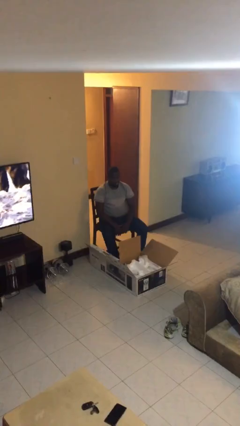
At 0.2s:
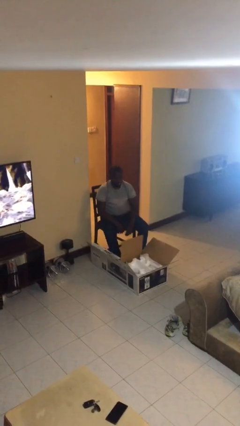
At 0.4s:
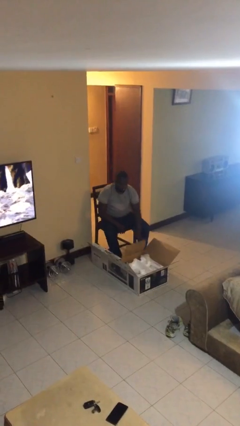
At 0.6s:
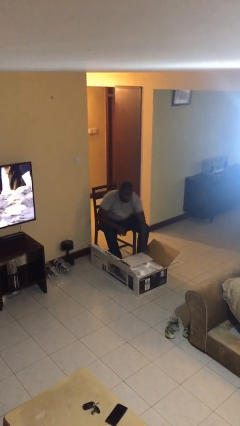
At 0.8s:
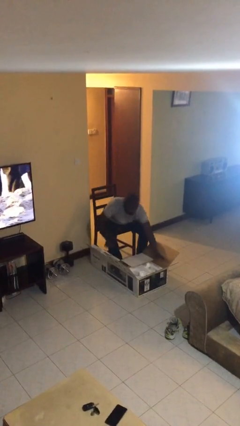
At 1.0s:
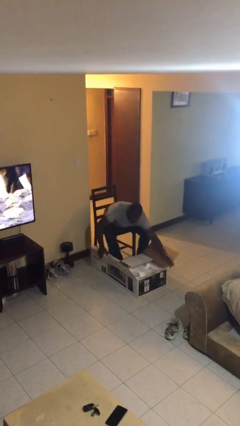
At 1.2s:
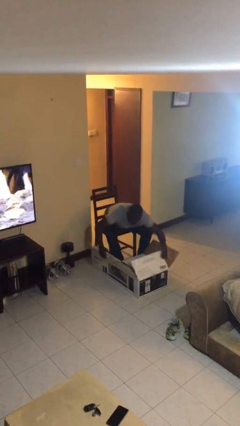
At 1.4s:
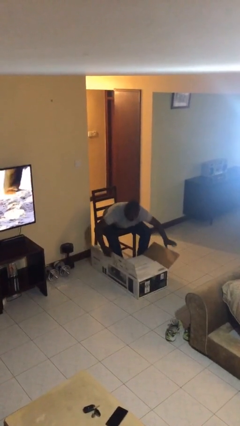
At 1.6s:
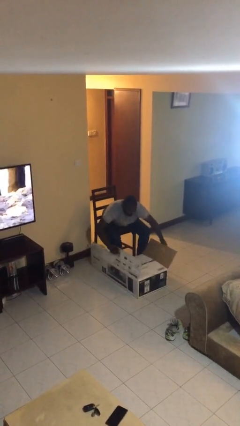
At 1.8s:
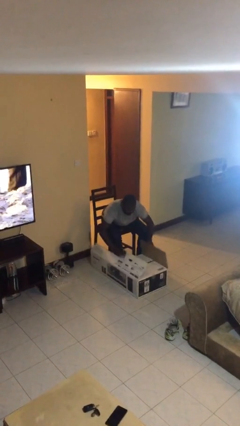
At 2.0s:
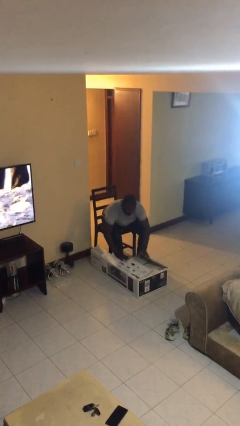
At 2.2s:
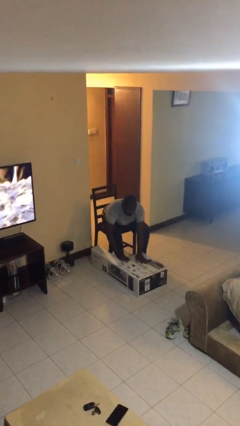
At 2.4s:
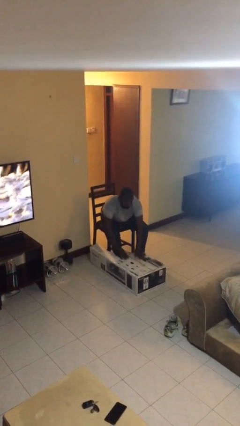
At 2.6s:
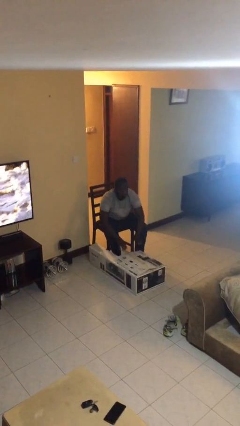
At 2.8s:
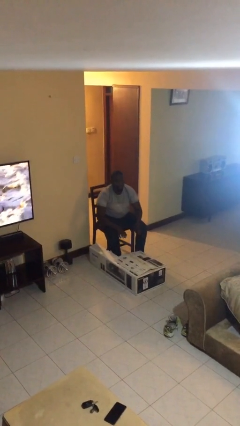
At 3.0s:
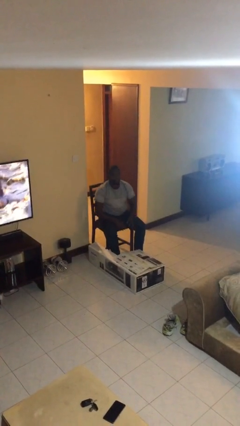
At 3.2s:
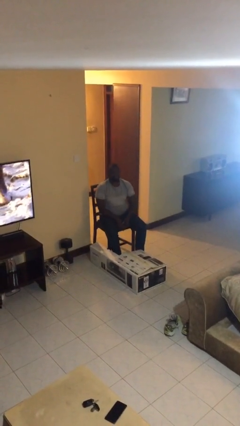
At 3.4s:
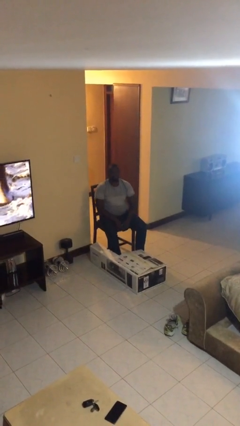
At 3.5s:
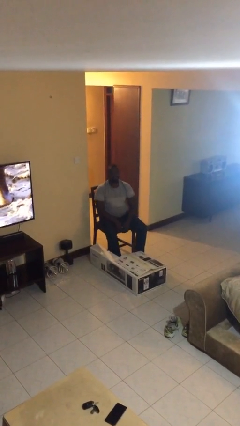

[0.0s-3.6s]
person closes box

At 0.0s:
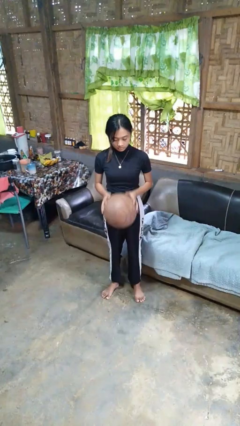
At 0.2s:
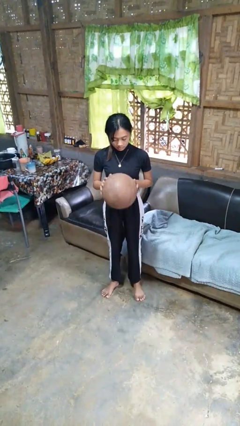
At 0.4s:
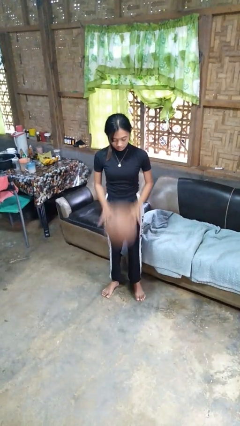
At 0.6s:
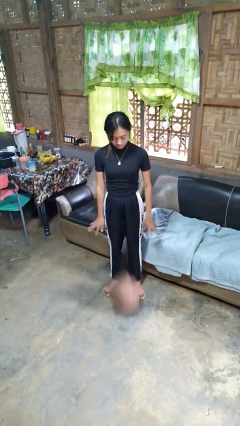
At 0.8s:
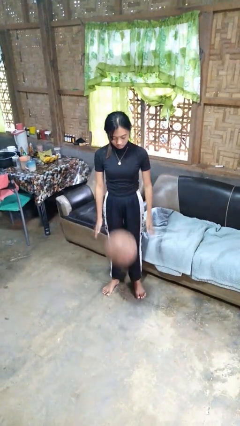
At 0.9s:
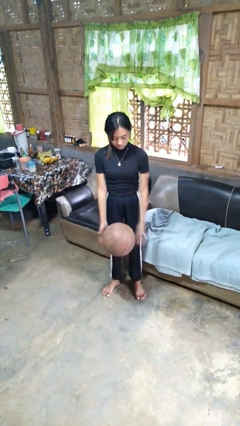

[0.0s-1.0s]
person bounces ball on floor

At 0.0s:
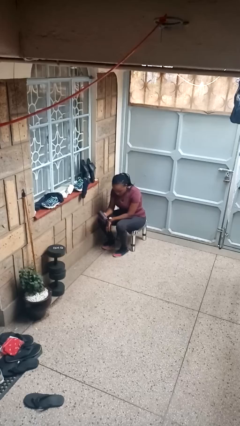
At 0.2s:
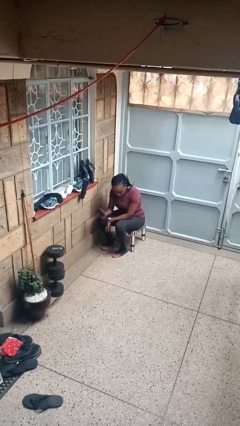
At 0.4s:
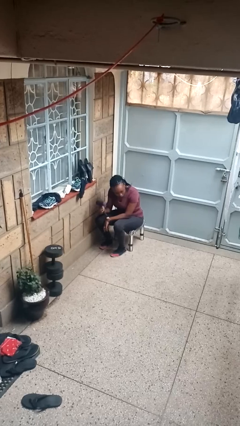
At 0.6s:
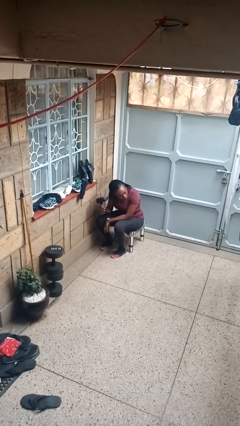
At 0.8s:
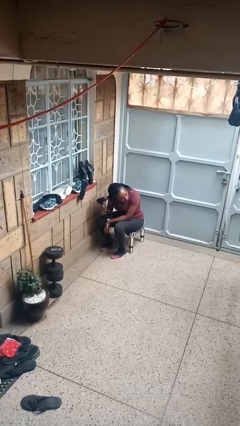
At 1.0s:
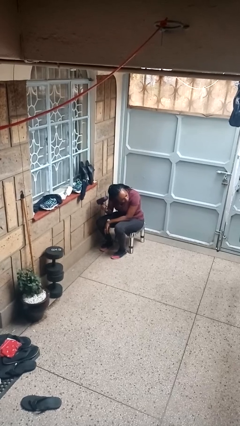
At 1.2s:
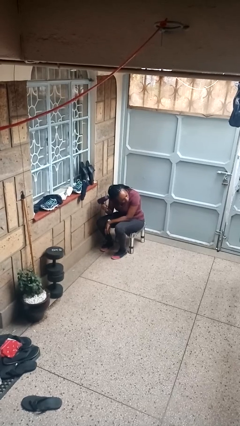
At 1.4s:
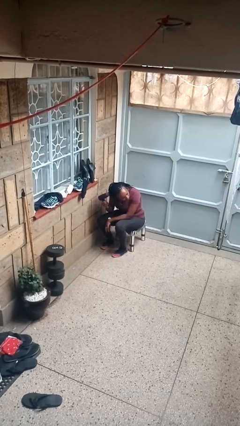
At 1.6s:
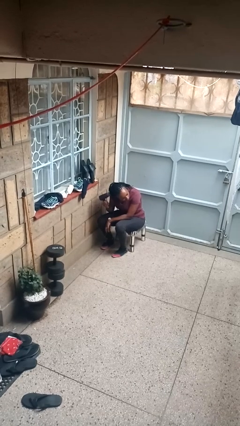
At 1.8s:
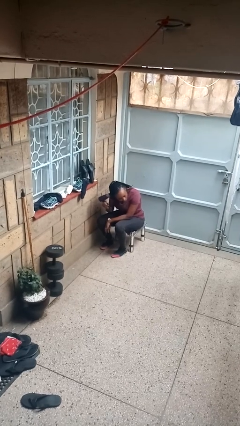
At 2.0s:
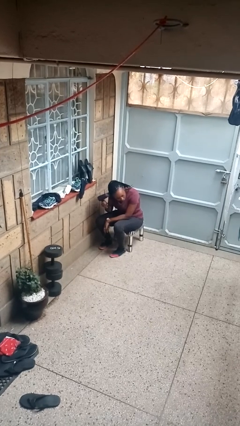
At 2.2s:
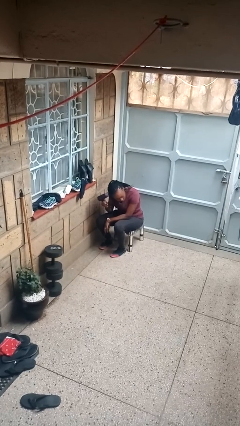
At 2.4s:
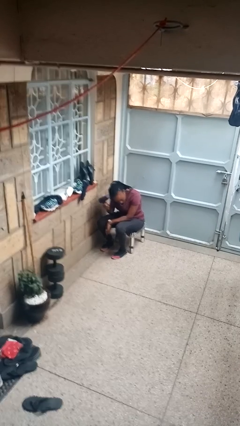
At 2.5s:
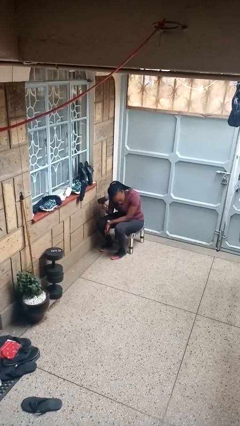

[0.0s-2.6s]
person dries hair with hairdryer

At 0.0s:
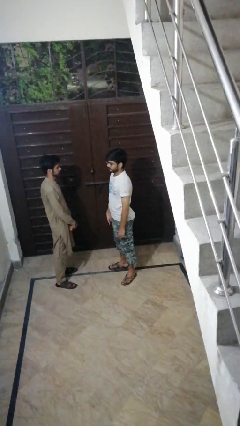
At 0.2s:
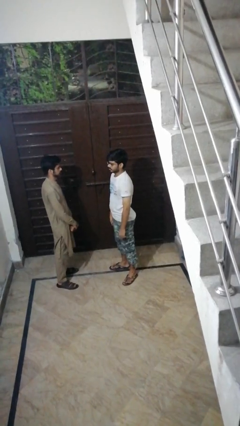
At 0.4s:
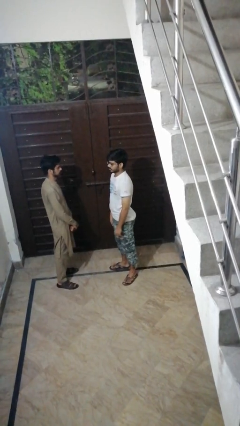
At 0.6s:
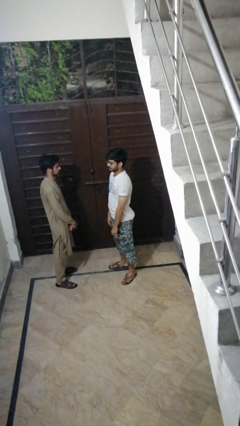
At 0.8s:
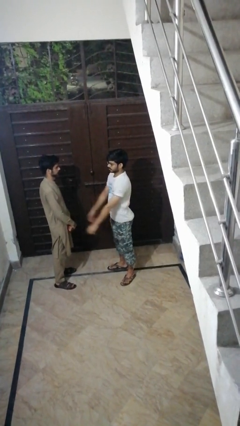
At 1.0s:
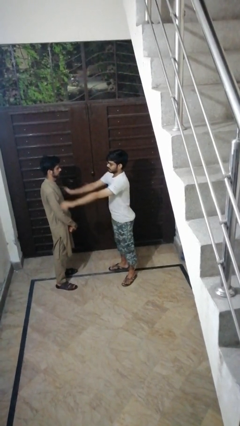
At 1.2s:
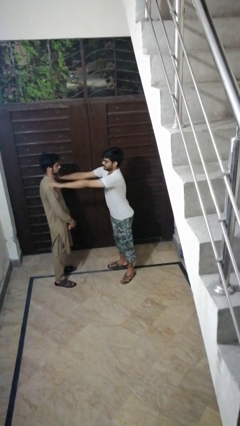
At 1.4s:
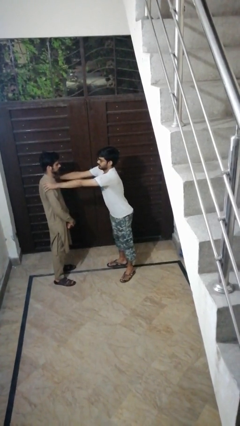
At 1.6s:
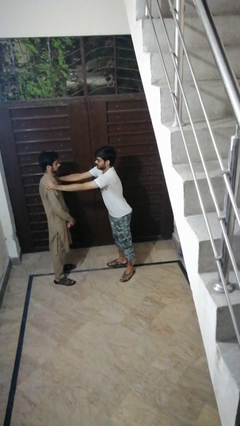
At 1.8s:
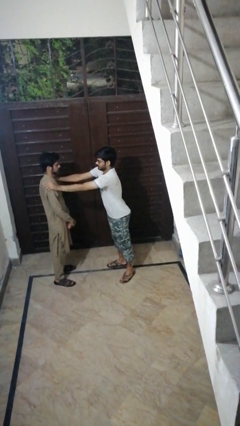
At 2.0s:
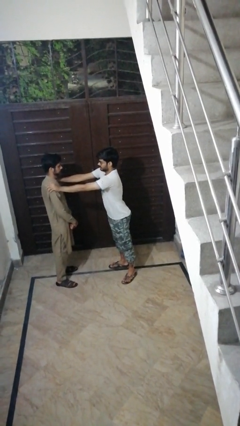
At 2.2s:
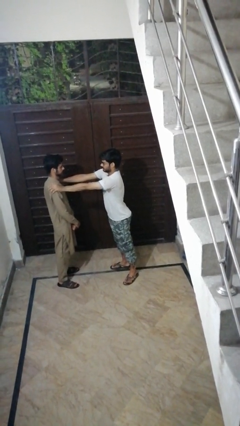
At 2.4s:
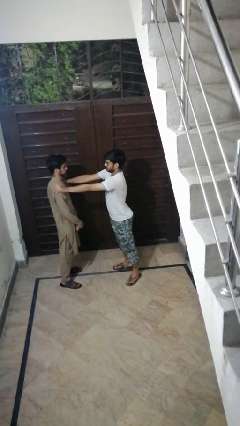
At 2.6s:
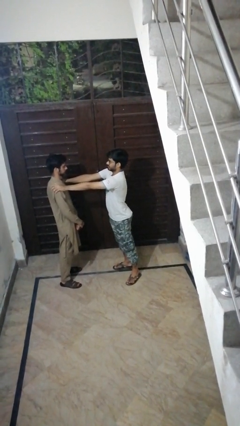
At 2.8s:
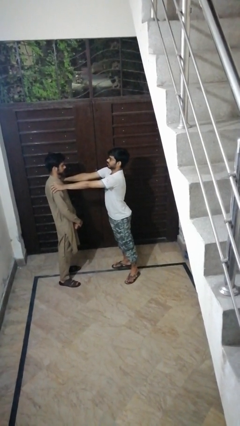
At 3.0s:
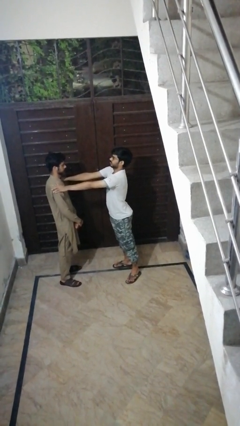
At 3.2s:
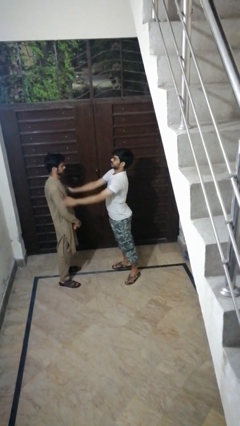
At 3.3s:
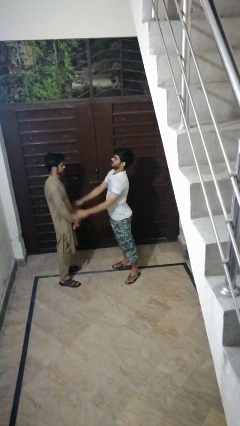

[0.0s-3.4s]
person pounds shoulders of person

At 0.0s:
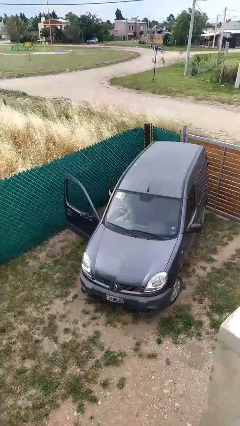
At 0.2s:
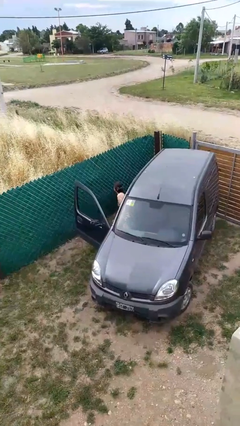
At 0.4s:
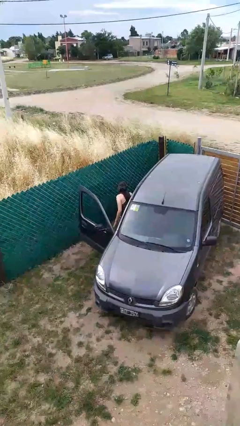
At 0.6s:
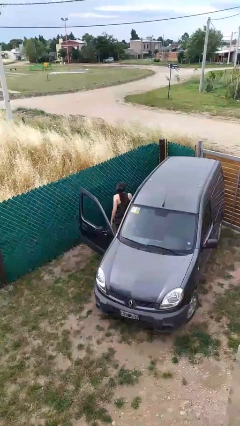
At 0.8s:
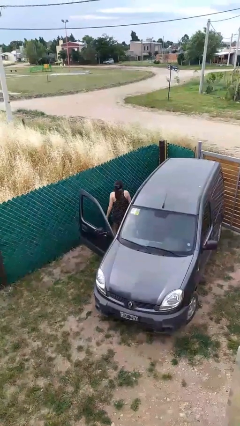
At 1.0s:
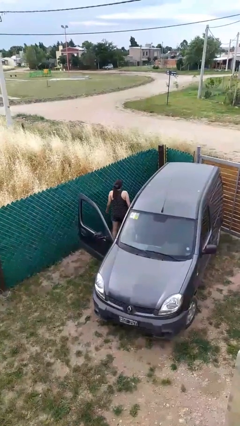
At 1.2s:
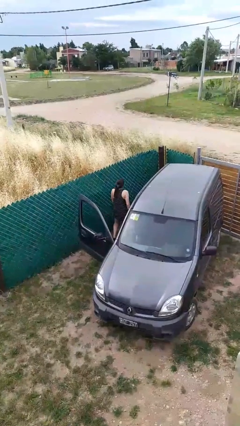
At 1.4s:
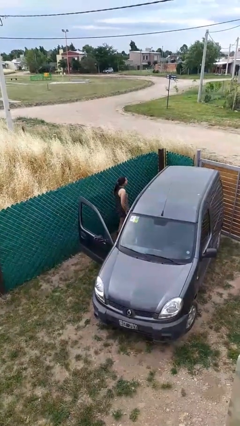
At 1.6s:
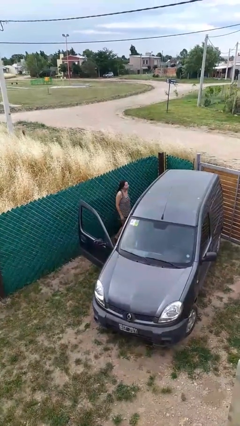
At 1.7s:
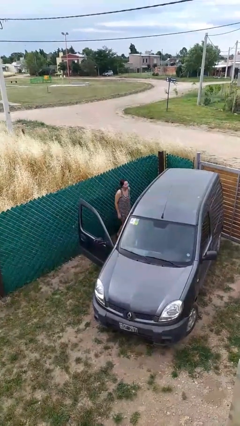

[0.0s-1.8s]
person exits car

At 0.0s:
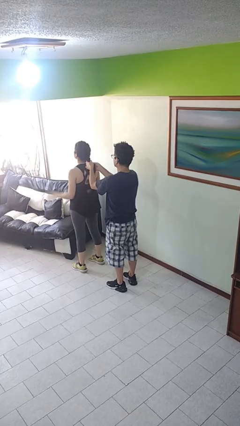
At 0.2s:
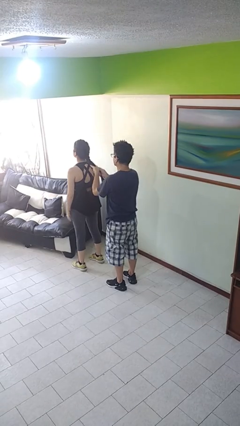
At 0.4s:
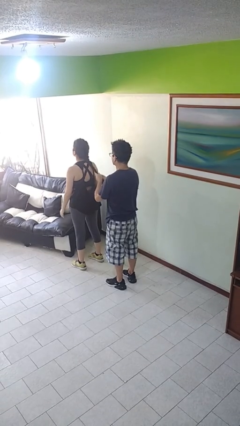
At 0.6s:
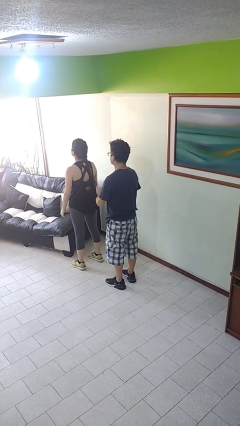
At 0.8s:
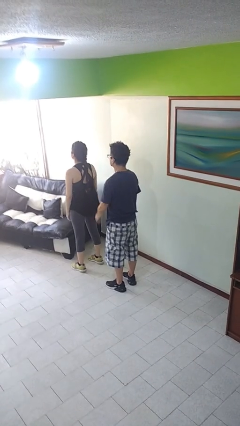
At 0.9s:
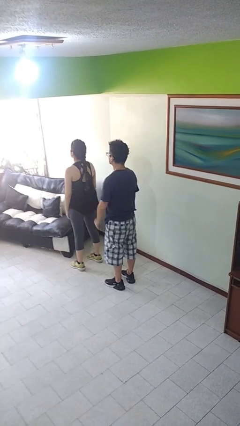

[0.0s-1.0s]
person grabs person by hair

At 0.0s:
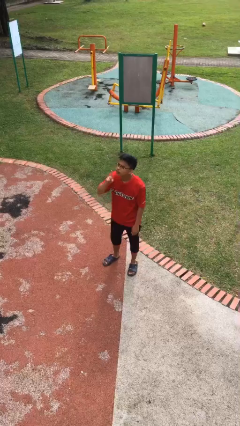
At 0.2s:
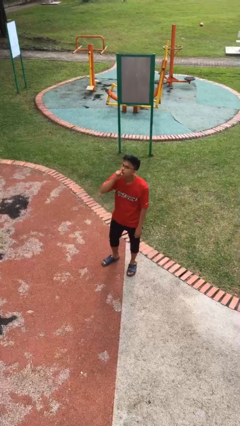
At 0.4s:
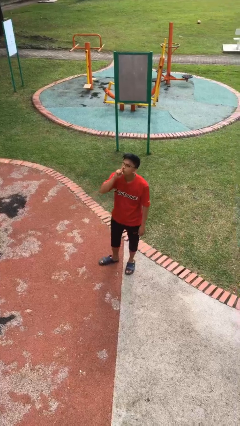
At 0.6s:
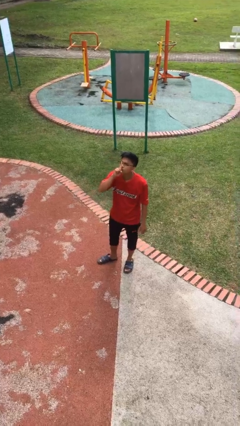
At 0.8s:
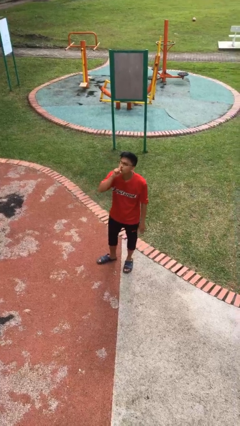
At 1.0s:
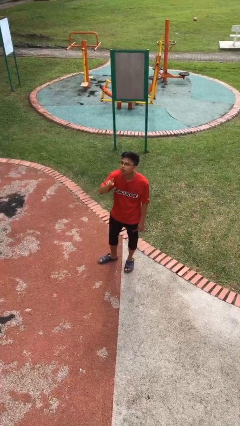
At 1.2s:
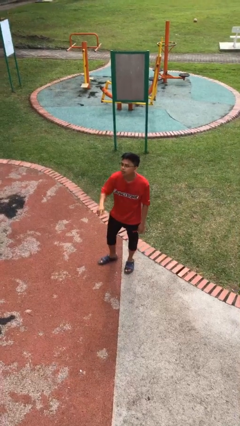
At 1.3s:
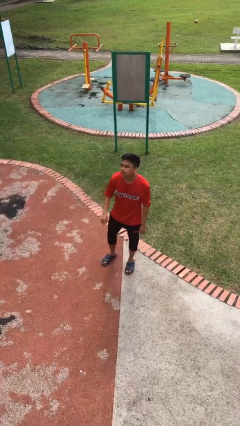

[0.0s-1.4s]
person gestures be quiet

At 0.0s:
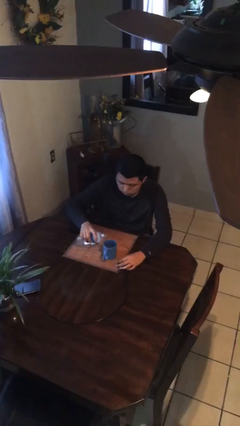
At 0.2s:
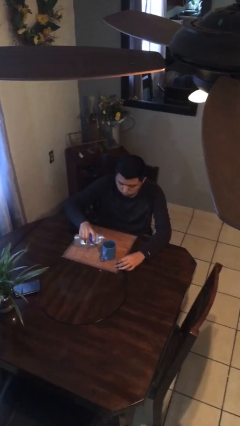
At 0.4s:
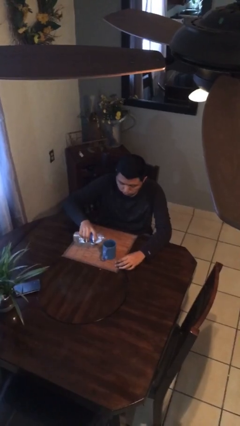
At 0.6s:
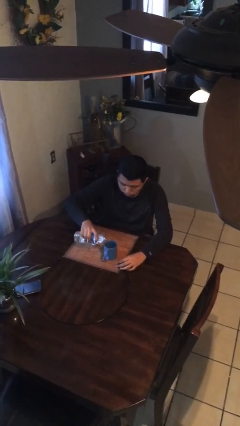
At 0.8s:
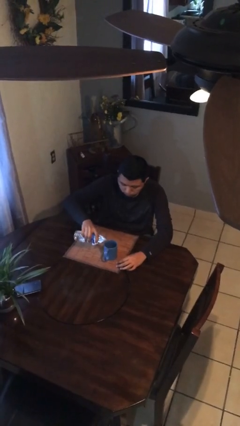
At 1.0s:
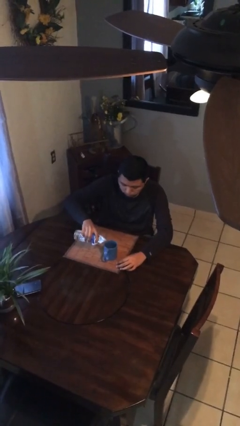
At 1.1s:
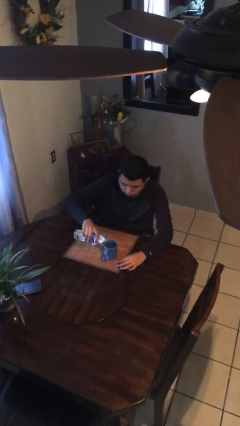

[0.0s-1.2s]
person pours liquid into cup

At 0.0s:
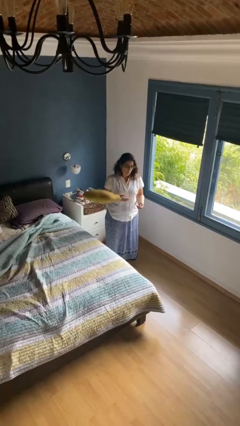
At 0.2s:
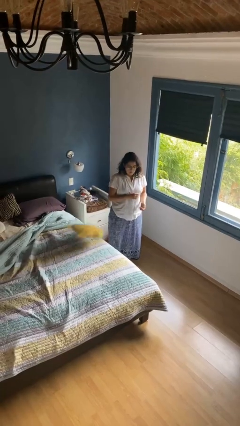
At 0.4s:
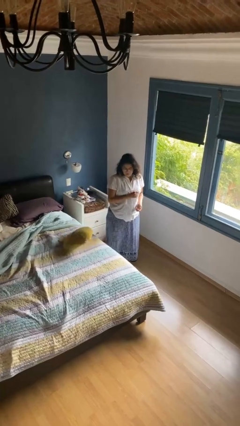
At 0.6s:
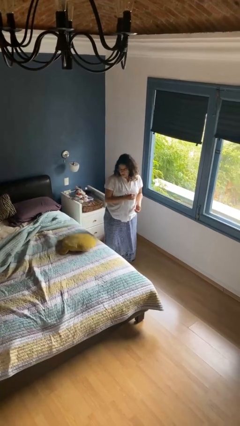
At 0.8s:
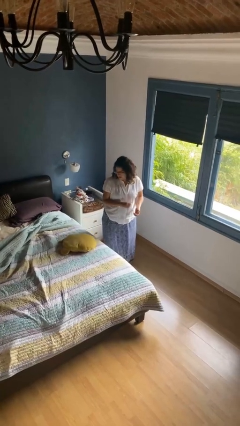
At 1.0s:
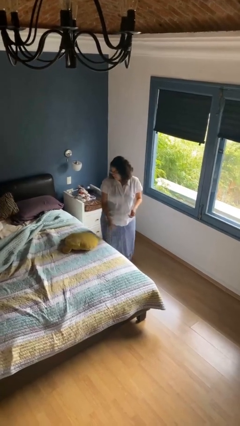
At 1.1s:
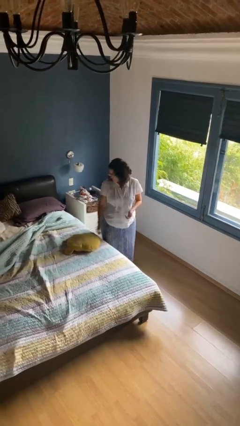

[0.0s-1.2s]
person throws object on bed
